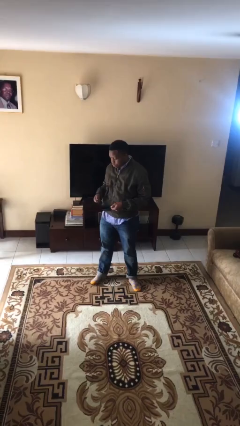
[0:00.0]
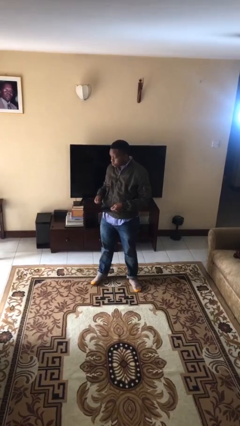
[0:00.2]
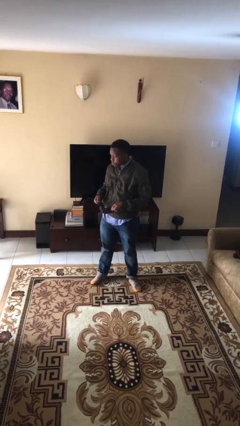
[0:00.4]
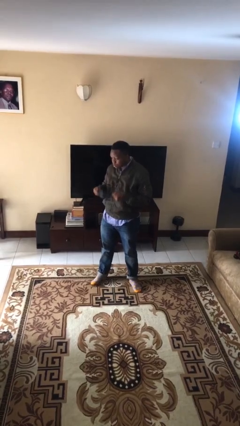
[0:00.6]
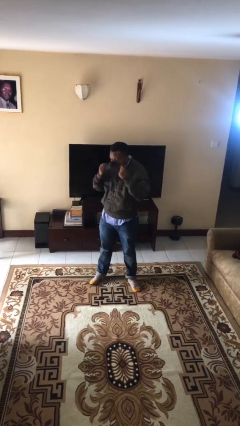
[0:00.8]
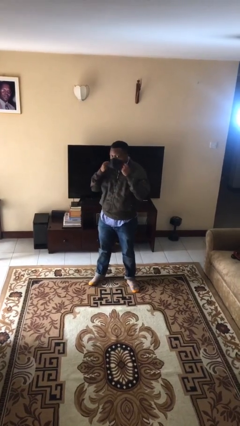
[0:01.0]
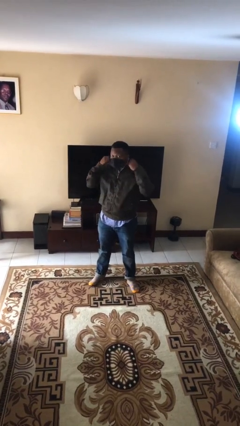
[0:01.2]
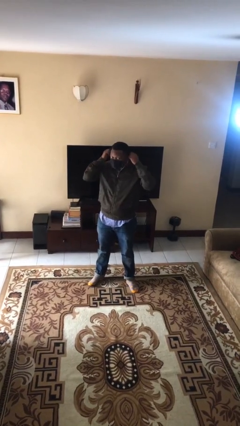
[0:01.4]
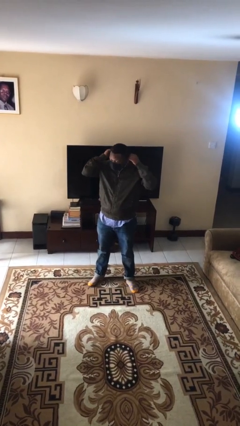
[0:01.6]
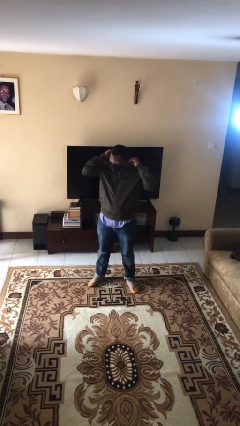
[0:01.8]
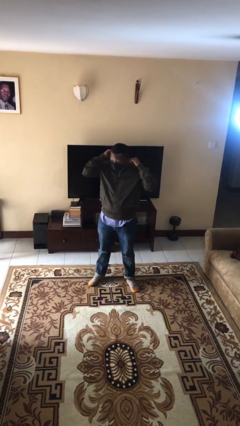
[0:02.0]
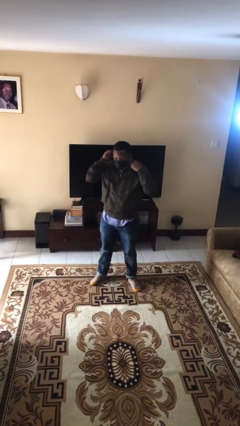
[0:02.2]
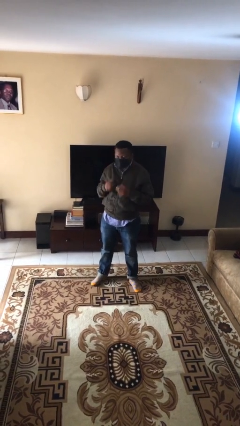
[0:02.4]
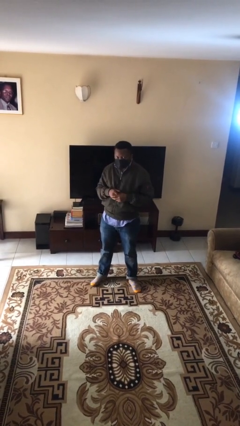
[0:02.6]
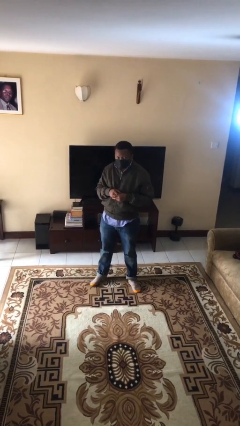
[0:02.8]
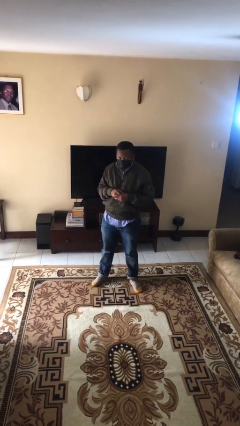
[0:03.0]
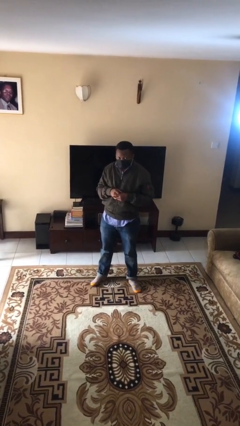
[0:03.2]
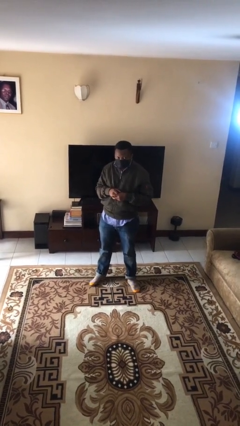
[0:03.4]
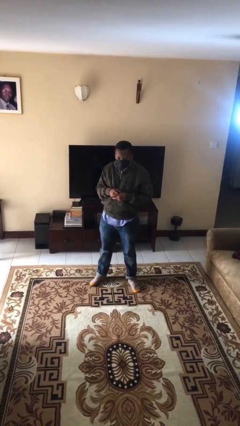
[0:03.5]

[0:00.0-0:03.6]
person puts on facemask

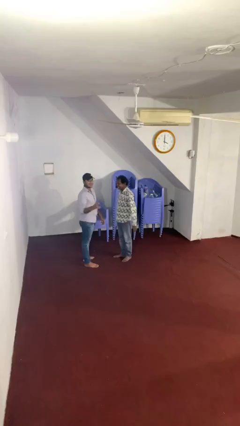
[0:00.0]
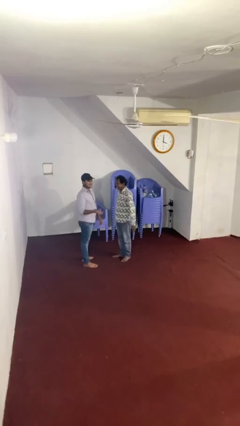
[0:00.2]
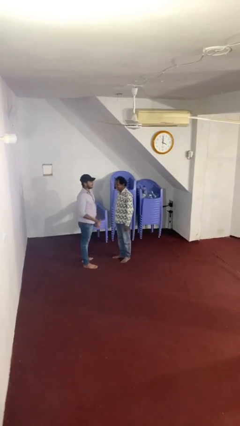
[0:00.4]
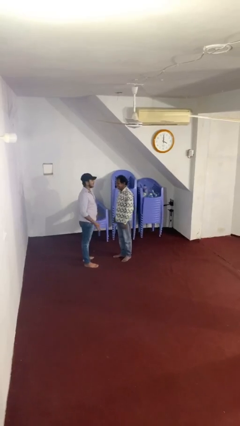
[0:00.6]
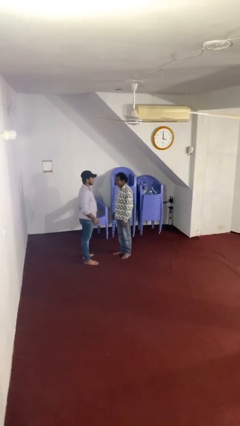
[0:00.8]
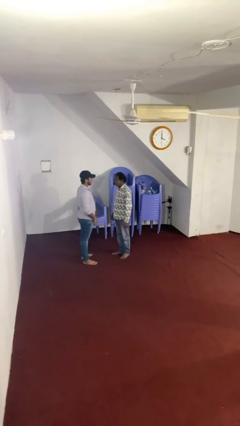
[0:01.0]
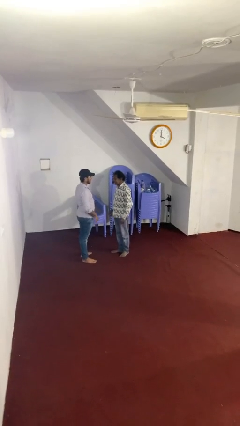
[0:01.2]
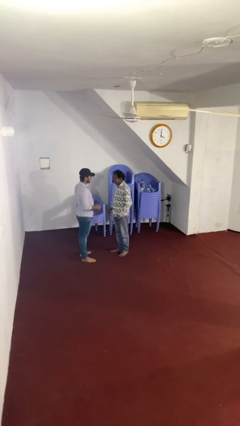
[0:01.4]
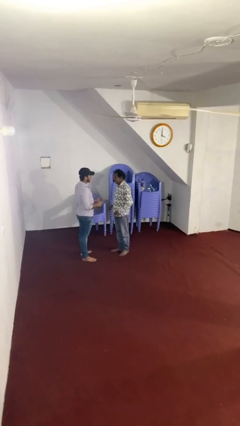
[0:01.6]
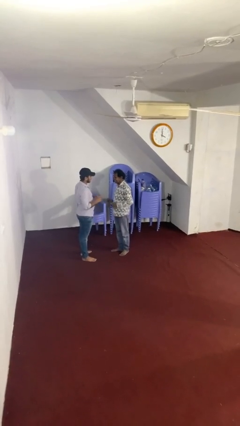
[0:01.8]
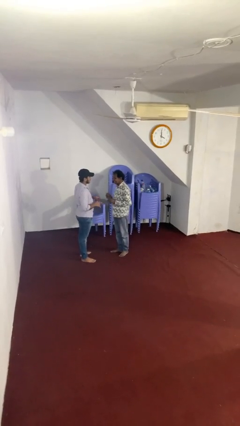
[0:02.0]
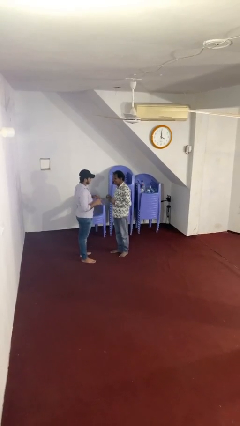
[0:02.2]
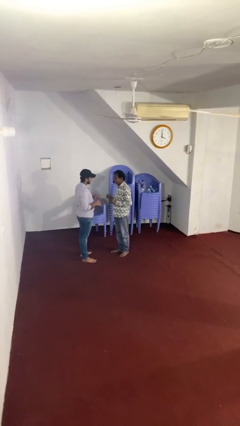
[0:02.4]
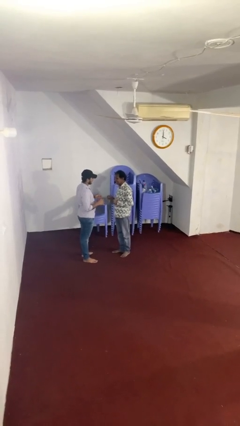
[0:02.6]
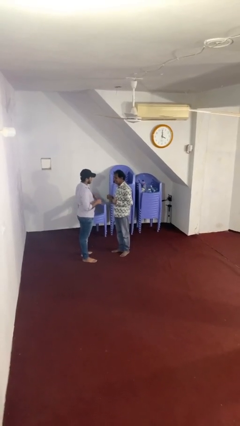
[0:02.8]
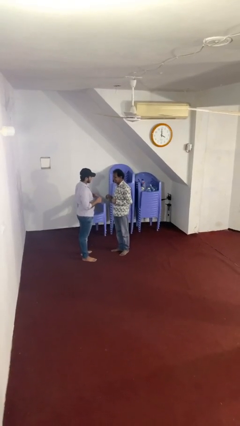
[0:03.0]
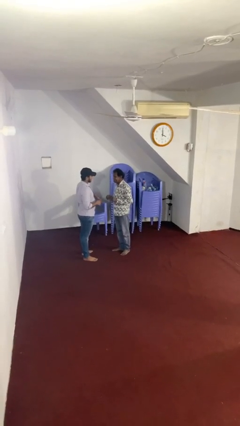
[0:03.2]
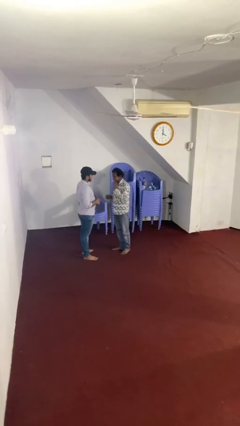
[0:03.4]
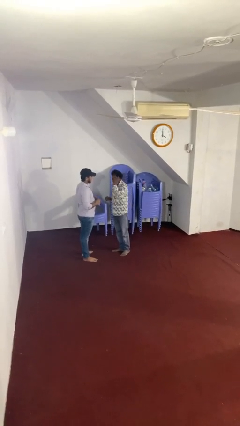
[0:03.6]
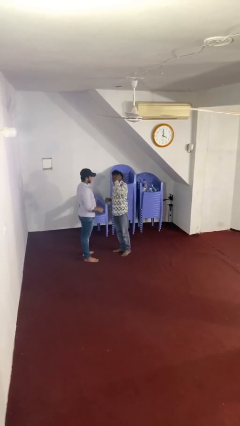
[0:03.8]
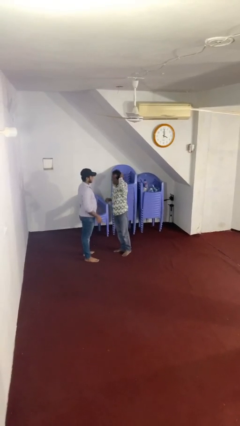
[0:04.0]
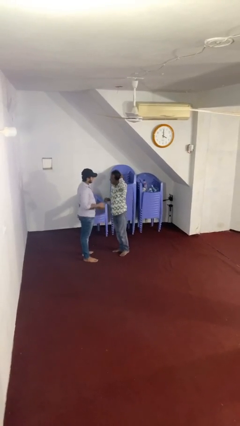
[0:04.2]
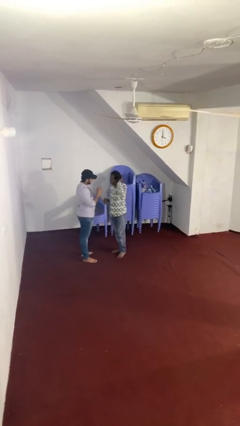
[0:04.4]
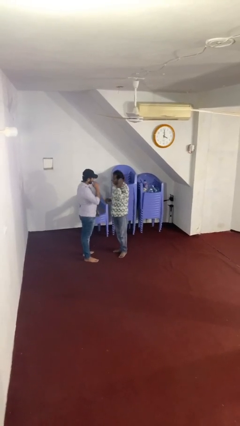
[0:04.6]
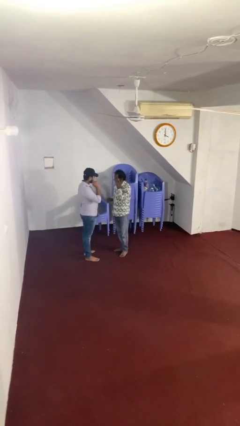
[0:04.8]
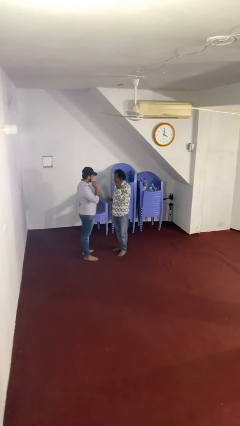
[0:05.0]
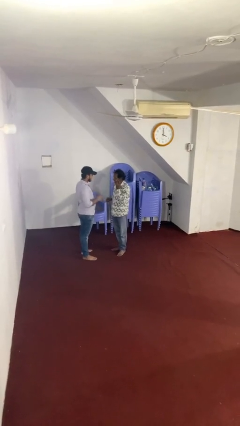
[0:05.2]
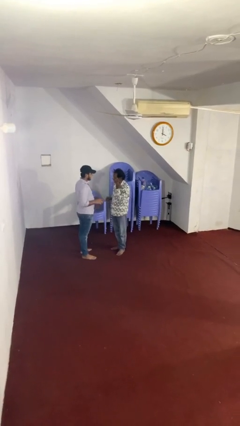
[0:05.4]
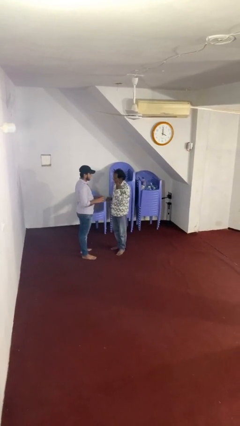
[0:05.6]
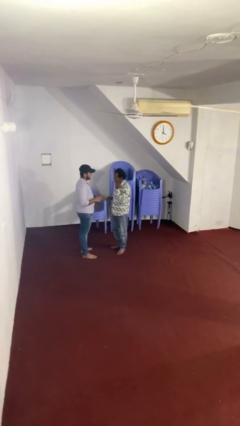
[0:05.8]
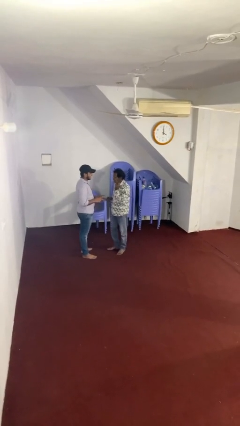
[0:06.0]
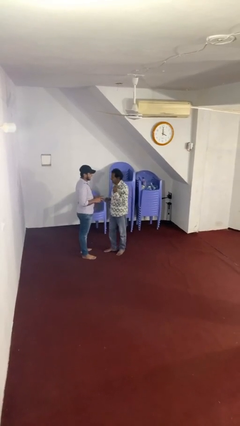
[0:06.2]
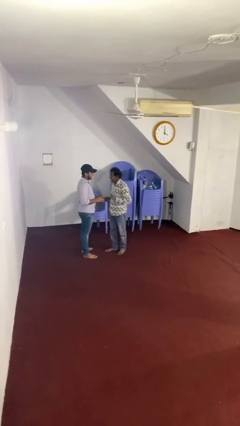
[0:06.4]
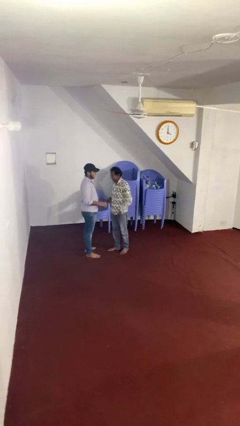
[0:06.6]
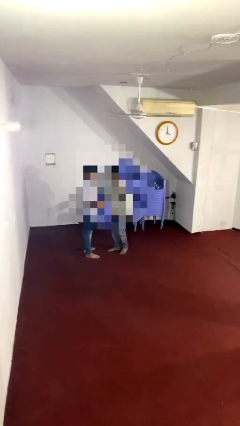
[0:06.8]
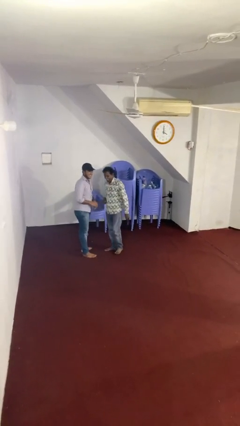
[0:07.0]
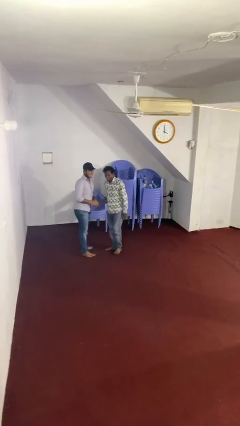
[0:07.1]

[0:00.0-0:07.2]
person talks to person

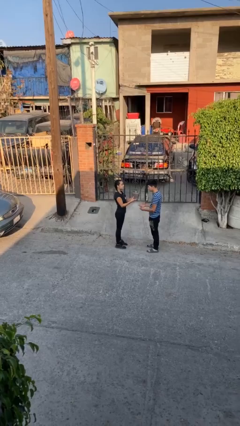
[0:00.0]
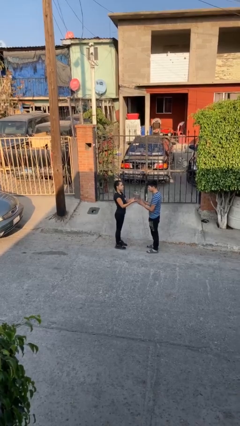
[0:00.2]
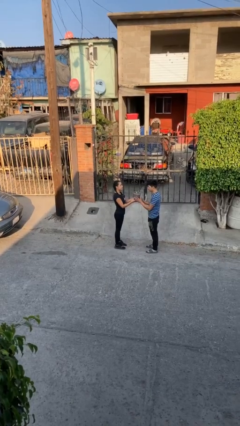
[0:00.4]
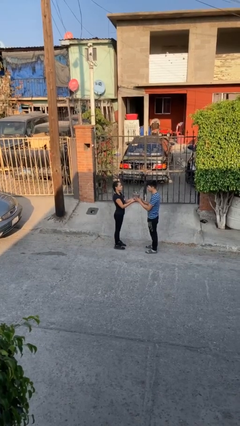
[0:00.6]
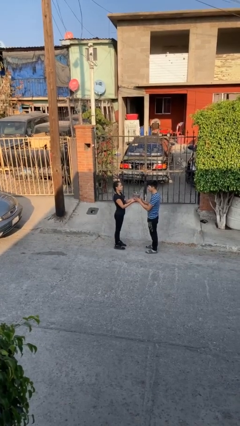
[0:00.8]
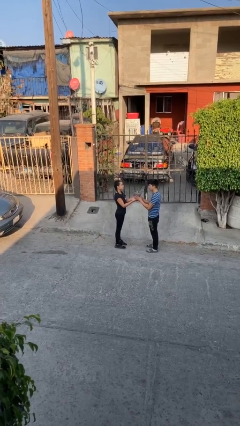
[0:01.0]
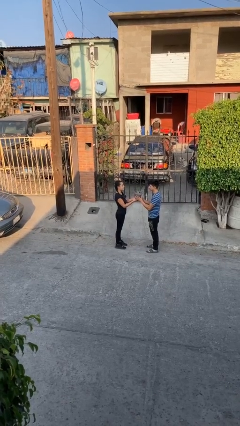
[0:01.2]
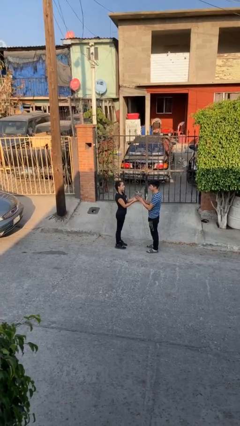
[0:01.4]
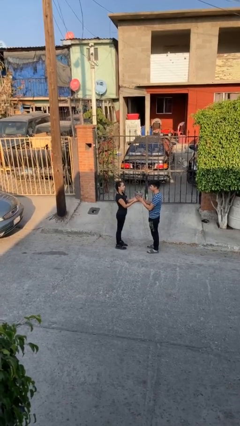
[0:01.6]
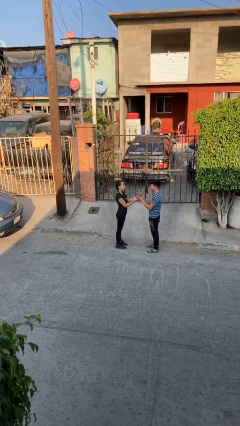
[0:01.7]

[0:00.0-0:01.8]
person transfers object to person

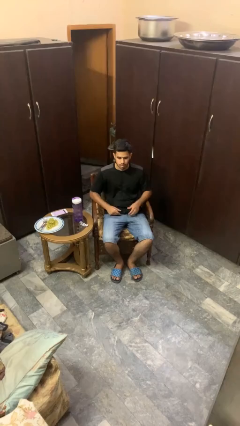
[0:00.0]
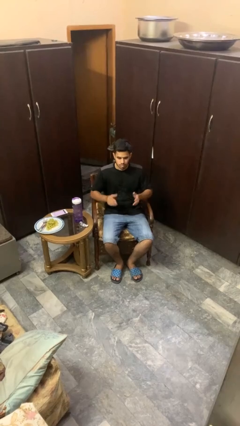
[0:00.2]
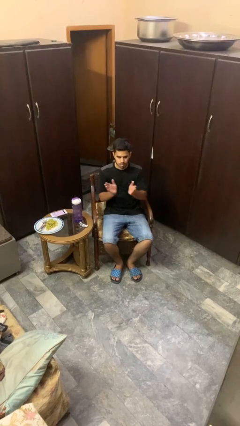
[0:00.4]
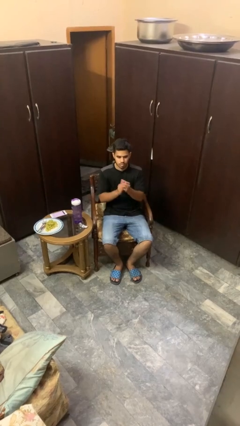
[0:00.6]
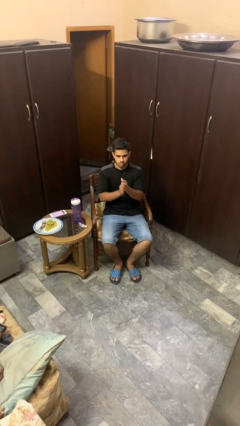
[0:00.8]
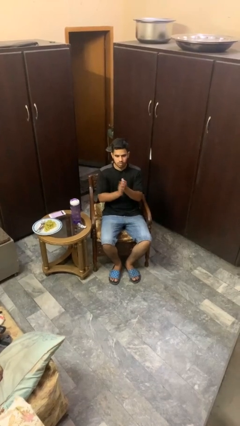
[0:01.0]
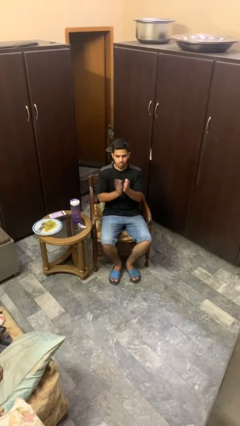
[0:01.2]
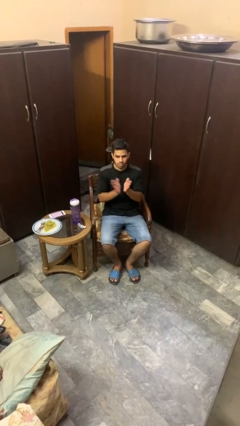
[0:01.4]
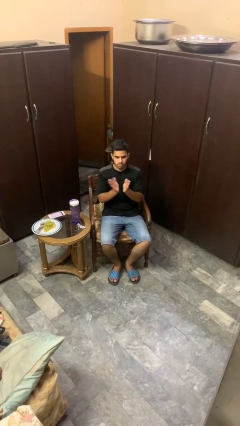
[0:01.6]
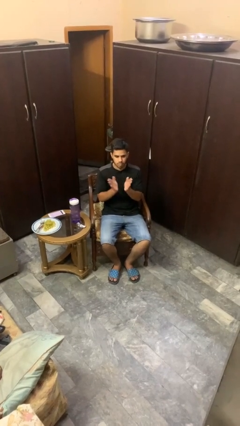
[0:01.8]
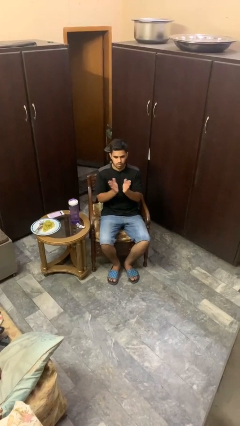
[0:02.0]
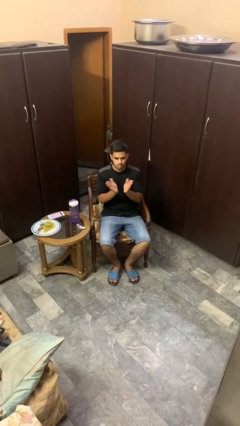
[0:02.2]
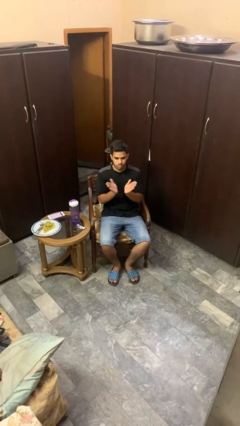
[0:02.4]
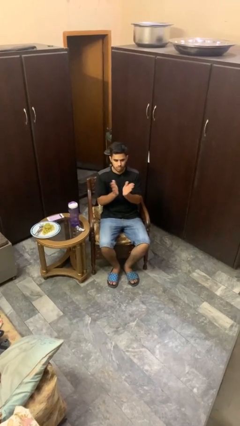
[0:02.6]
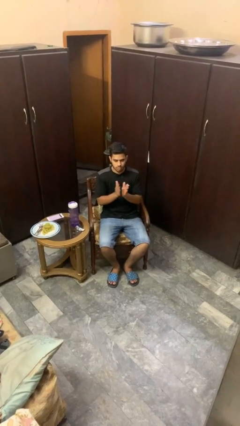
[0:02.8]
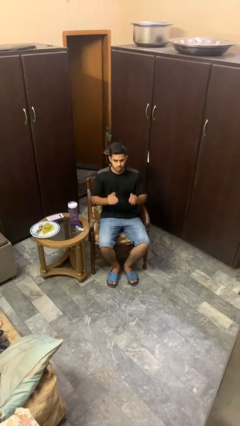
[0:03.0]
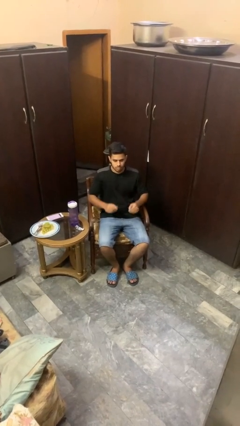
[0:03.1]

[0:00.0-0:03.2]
person claps hands

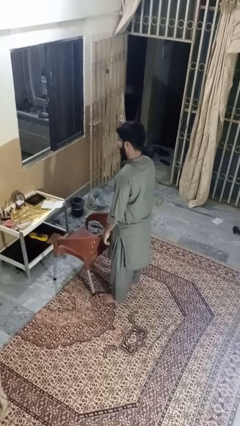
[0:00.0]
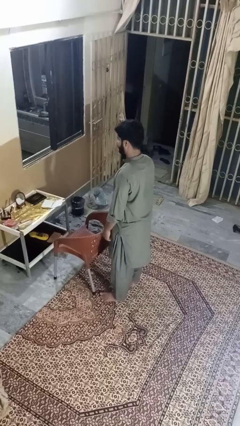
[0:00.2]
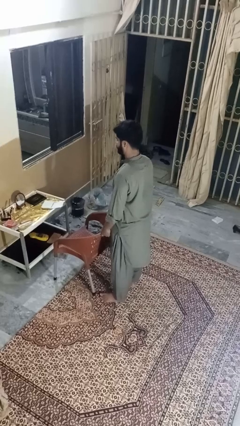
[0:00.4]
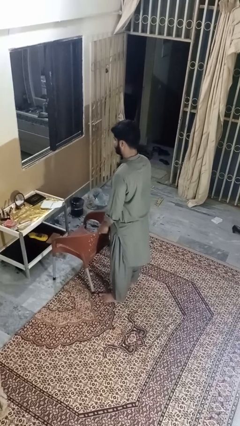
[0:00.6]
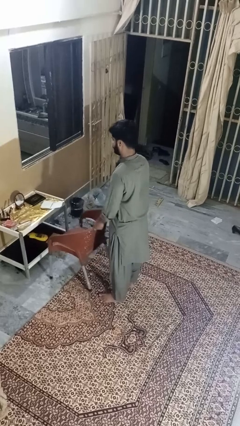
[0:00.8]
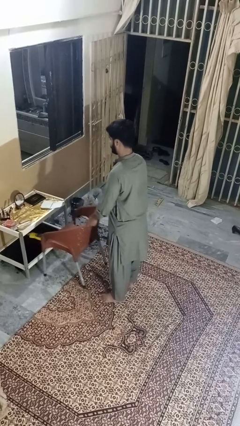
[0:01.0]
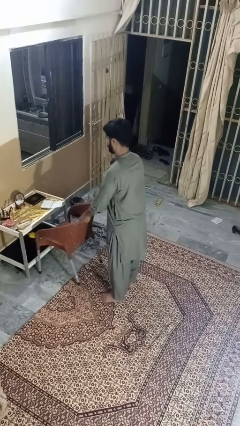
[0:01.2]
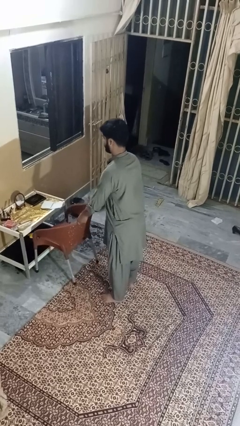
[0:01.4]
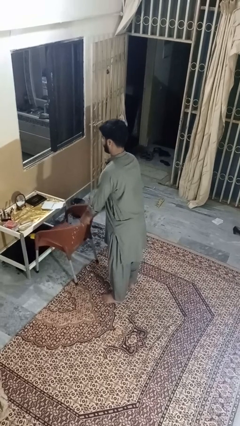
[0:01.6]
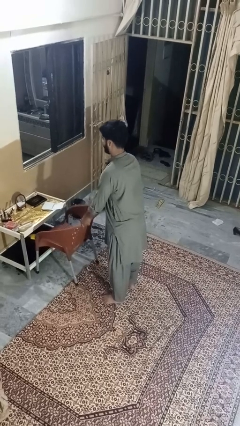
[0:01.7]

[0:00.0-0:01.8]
person pushes in chair
